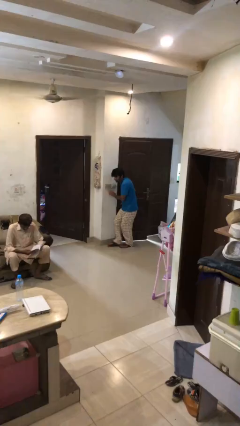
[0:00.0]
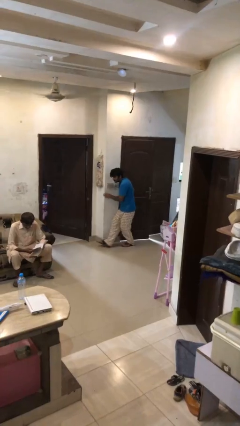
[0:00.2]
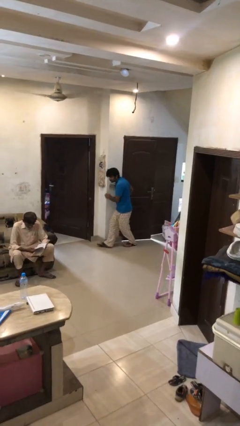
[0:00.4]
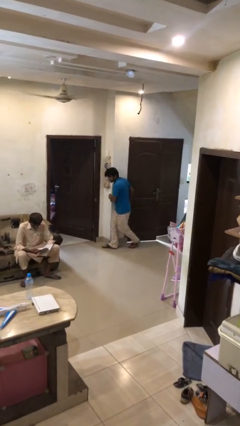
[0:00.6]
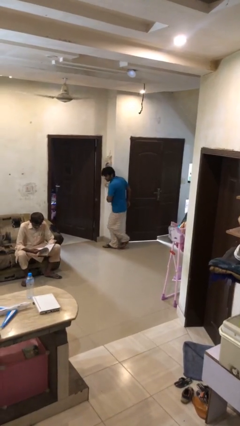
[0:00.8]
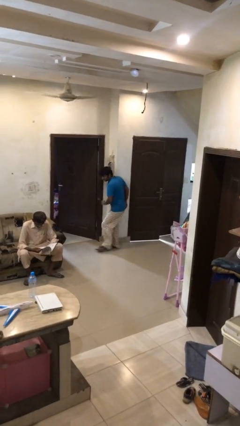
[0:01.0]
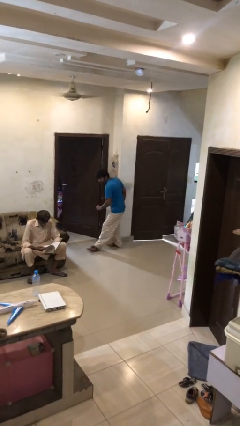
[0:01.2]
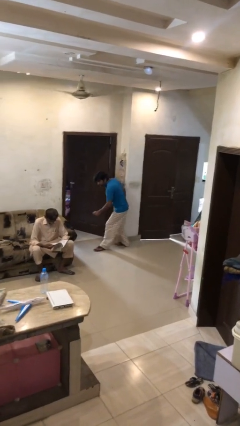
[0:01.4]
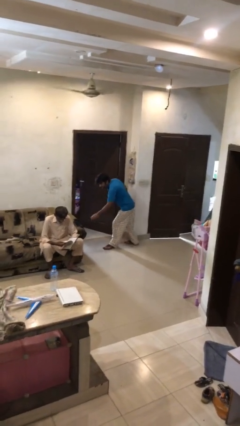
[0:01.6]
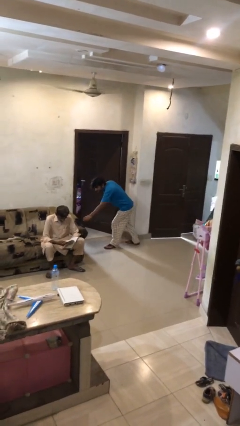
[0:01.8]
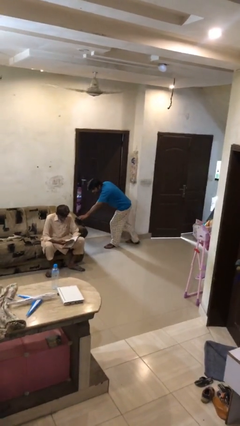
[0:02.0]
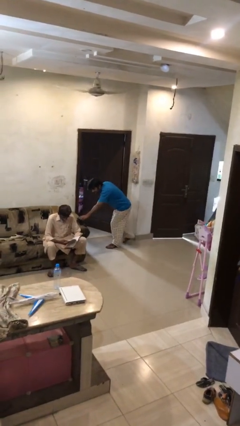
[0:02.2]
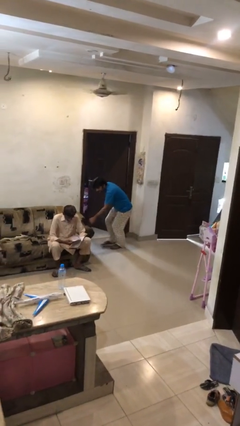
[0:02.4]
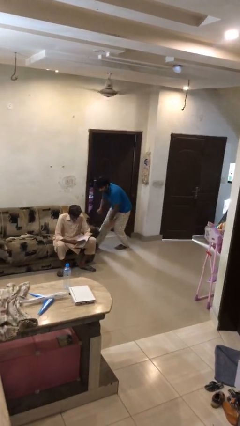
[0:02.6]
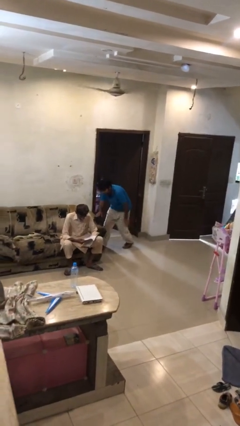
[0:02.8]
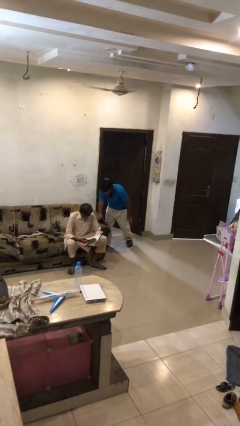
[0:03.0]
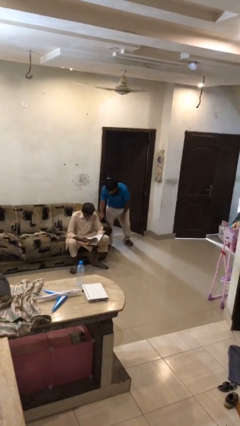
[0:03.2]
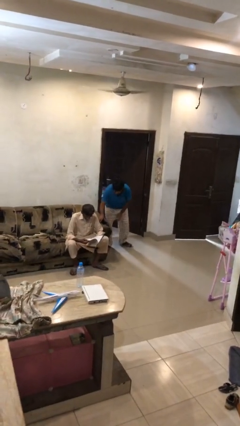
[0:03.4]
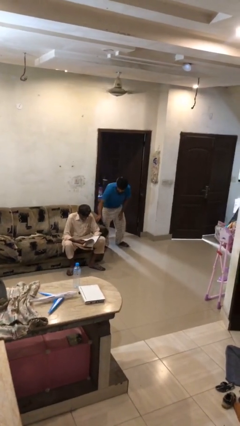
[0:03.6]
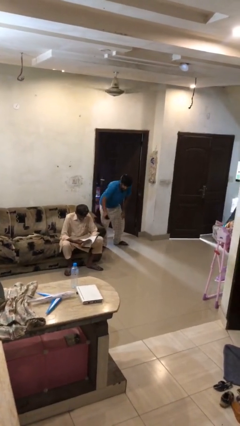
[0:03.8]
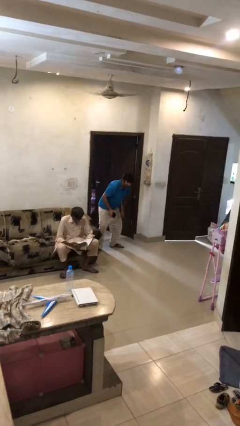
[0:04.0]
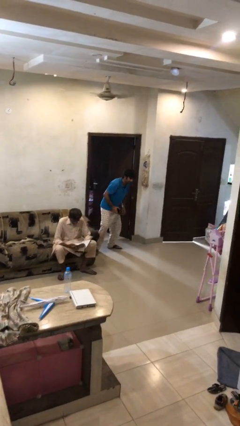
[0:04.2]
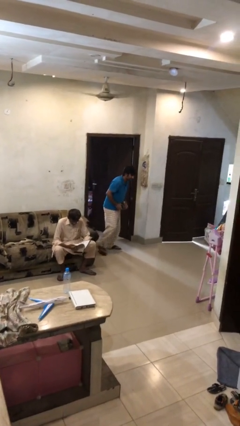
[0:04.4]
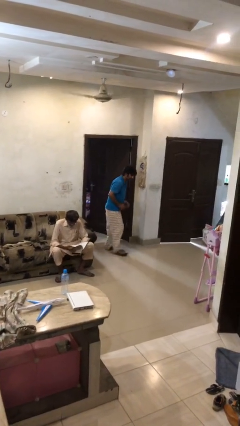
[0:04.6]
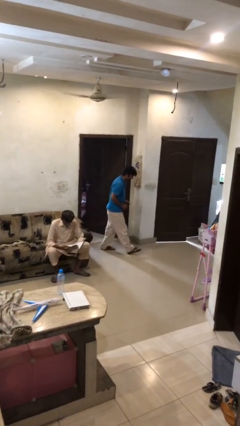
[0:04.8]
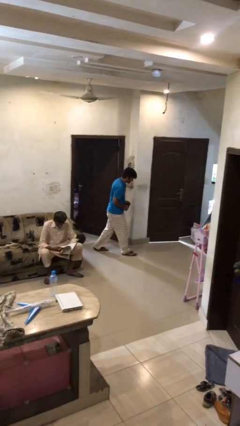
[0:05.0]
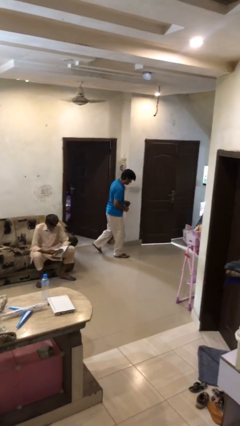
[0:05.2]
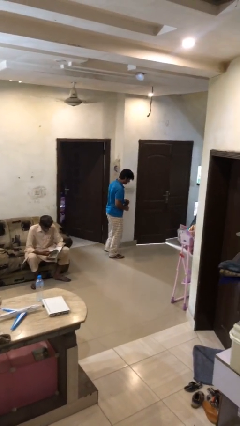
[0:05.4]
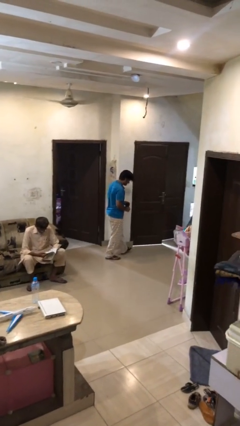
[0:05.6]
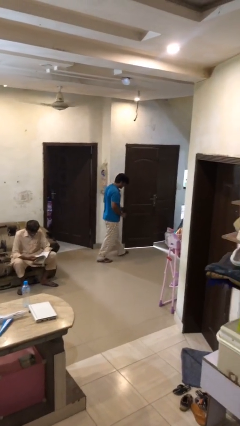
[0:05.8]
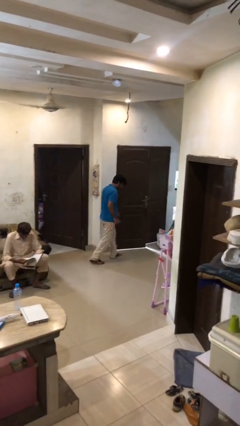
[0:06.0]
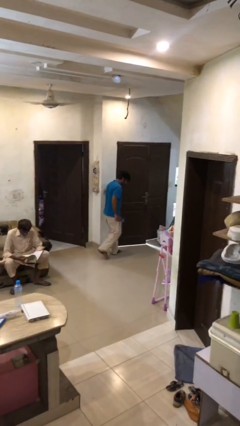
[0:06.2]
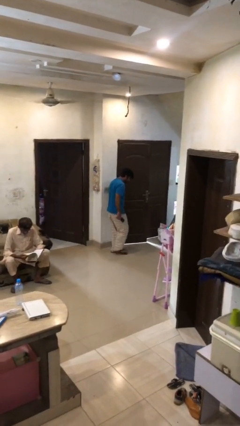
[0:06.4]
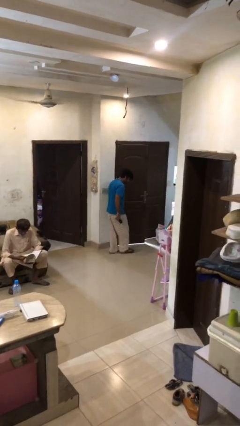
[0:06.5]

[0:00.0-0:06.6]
person steals object from person

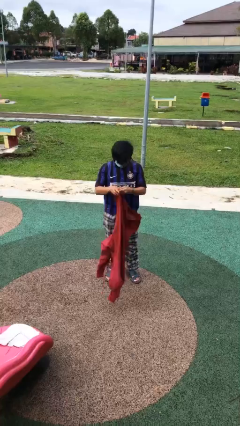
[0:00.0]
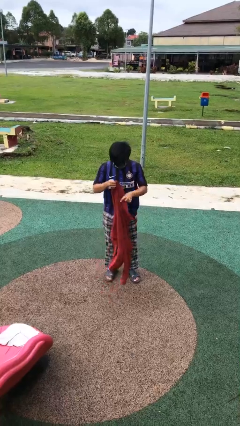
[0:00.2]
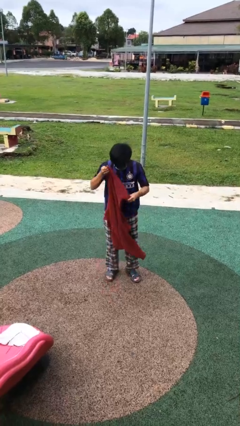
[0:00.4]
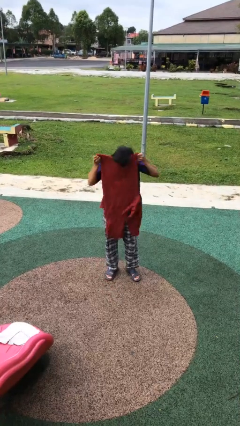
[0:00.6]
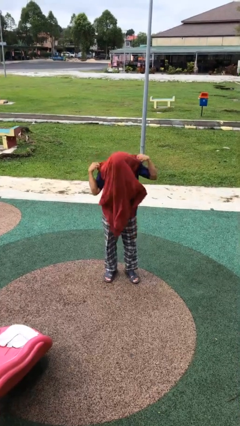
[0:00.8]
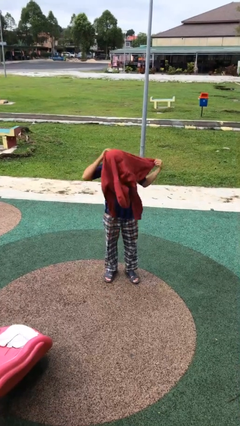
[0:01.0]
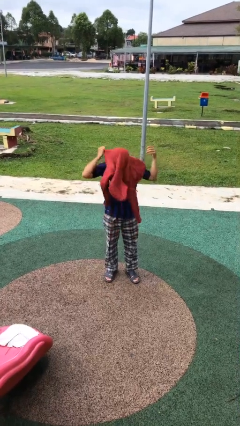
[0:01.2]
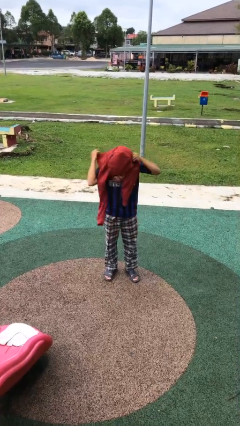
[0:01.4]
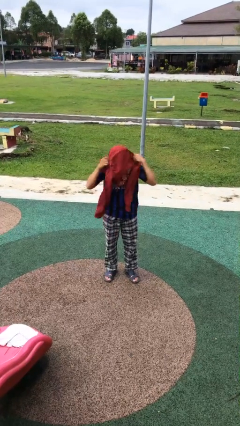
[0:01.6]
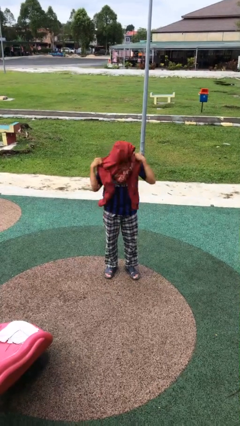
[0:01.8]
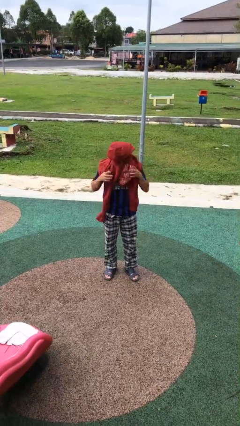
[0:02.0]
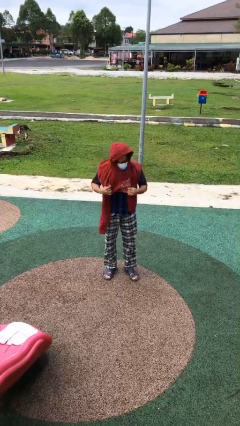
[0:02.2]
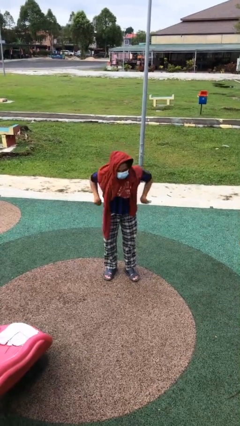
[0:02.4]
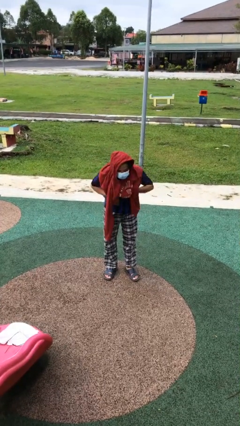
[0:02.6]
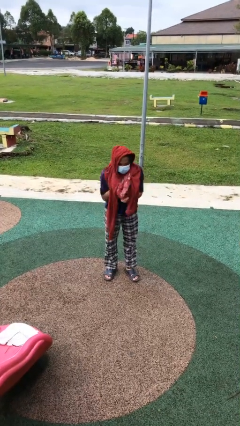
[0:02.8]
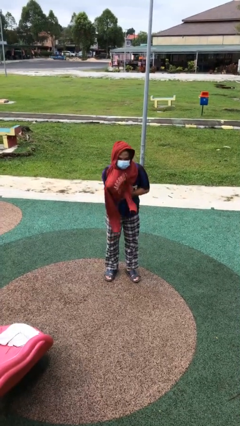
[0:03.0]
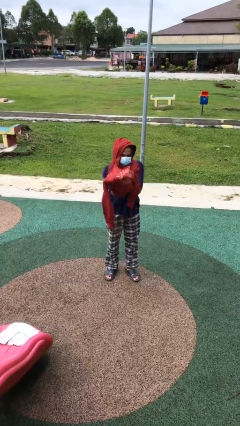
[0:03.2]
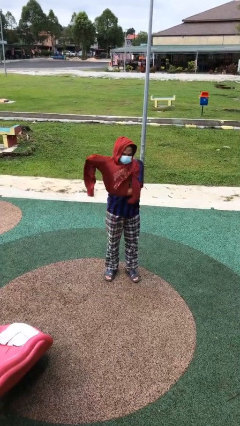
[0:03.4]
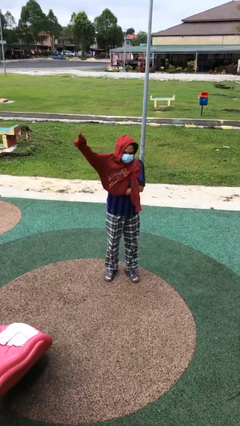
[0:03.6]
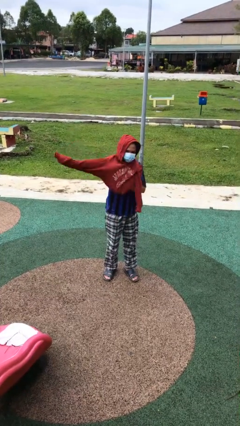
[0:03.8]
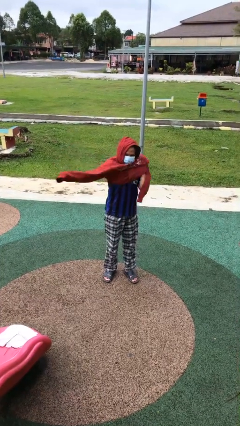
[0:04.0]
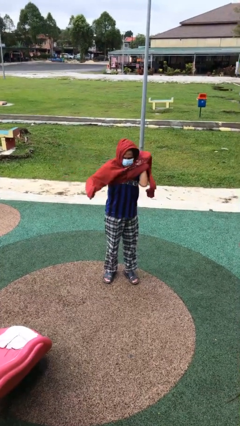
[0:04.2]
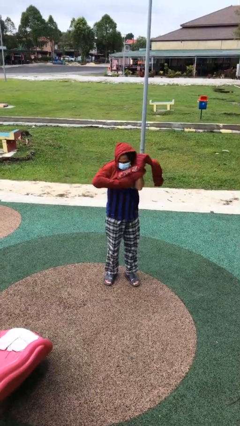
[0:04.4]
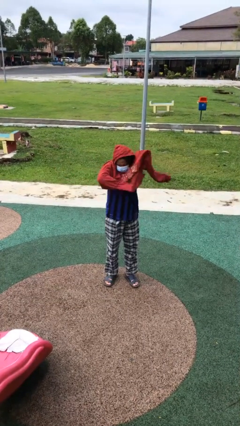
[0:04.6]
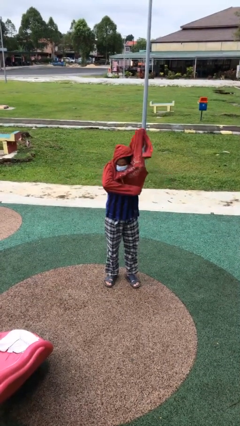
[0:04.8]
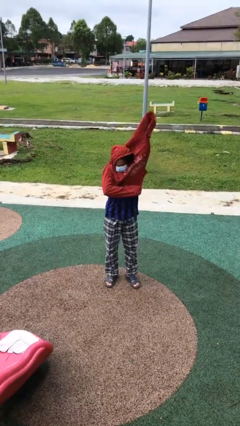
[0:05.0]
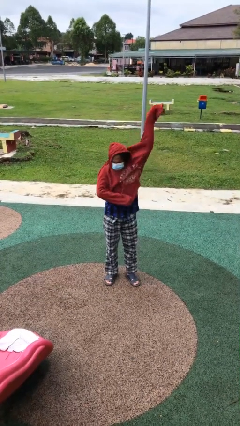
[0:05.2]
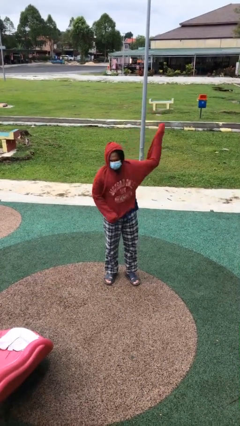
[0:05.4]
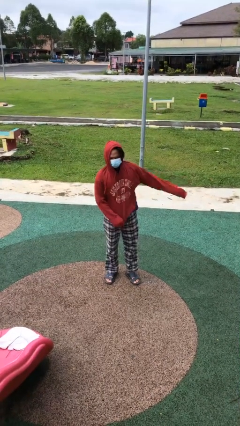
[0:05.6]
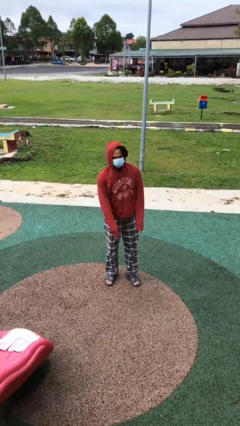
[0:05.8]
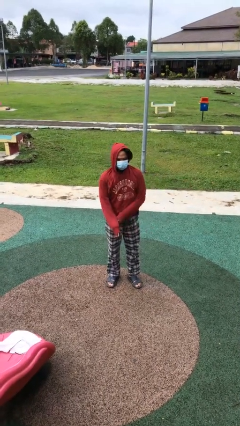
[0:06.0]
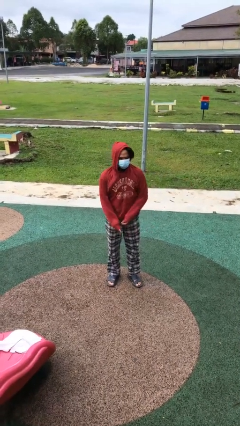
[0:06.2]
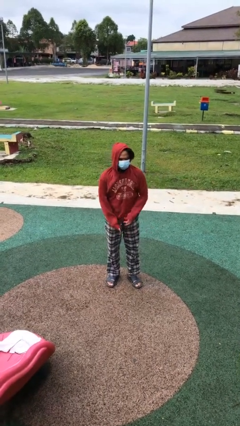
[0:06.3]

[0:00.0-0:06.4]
person puts on hoodie

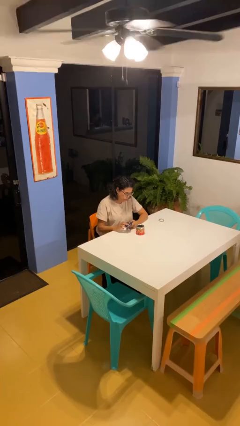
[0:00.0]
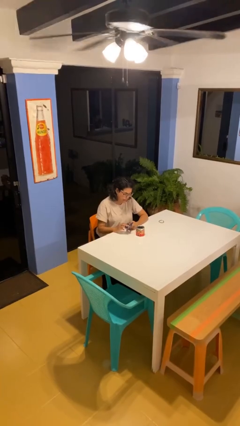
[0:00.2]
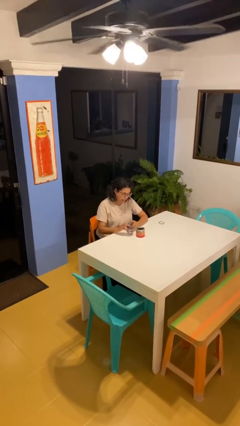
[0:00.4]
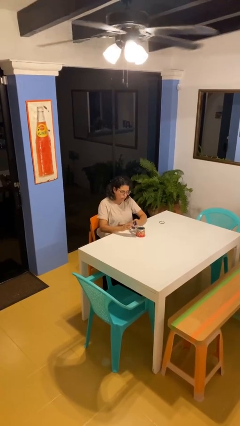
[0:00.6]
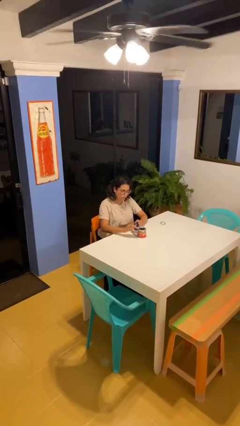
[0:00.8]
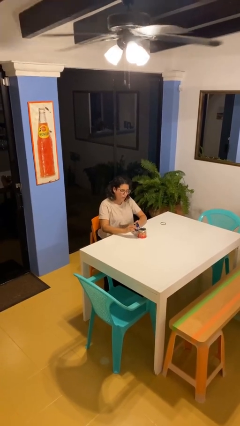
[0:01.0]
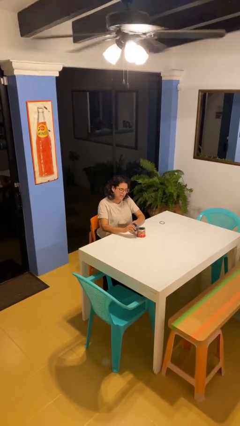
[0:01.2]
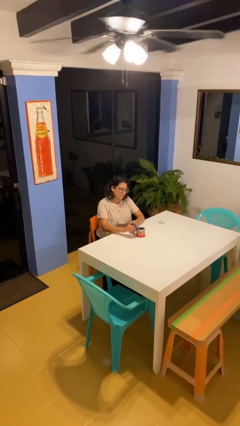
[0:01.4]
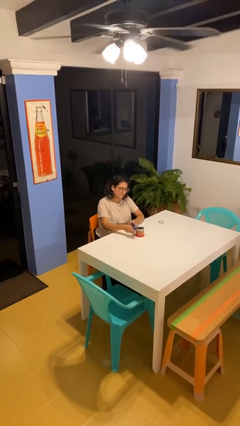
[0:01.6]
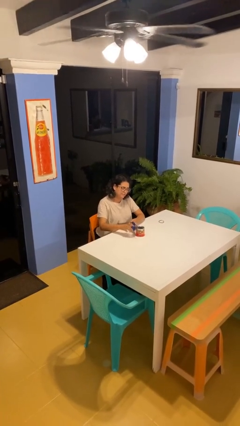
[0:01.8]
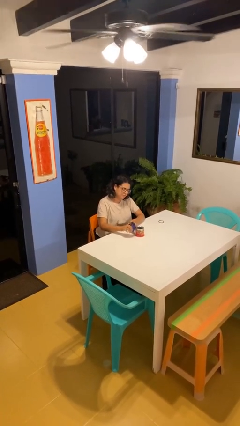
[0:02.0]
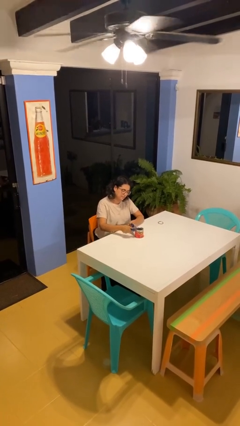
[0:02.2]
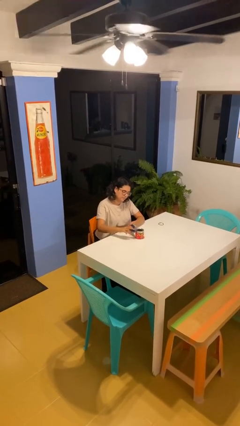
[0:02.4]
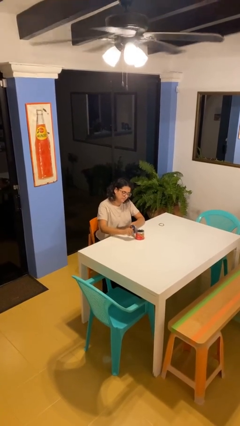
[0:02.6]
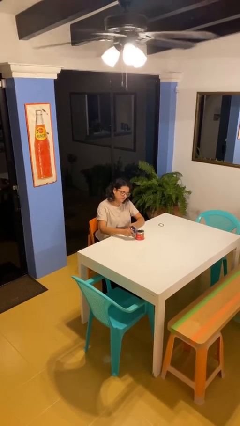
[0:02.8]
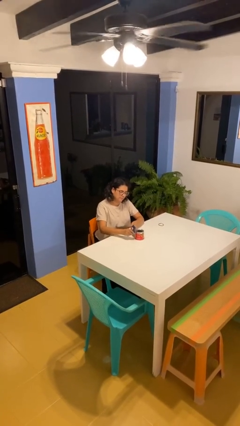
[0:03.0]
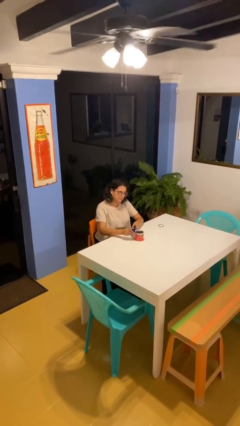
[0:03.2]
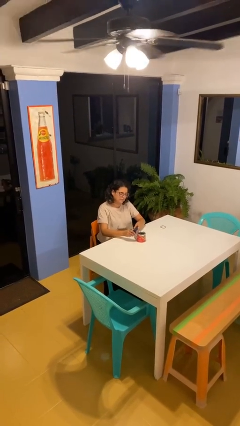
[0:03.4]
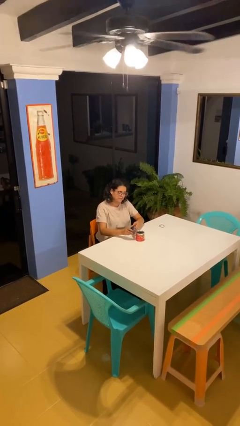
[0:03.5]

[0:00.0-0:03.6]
person opens can with can opener

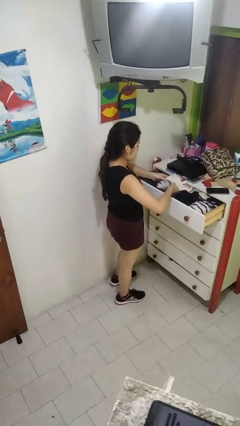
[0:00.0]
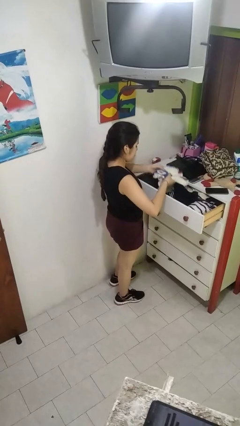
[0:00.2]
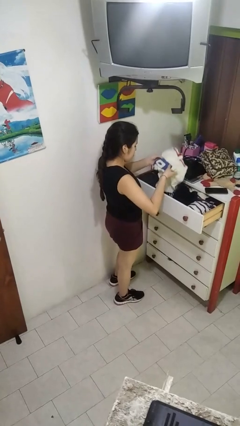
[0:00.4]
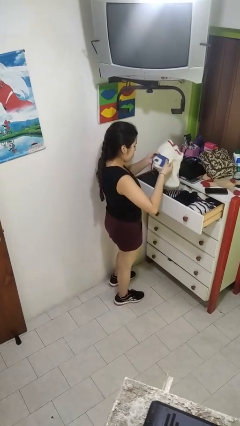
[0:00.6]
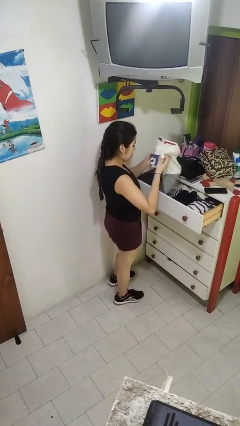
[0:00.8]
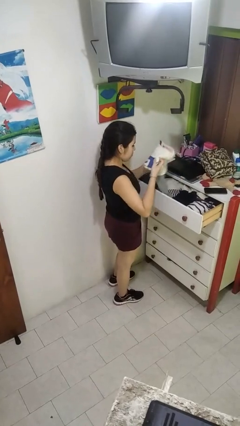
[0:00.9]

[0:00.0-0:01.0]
person takes clothes from dresser
